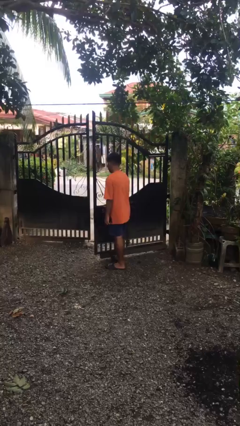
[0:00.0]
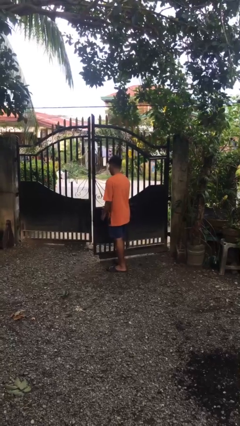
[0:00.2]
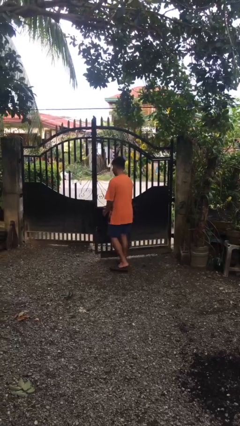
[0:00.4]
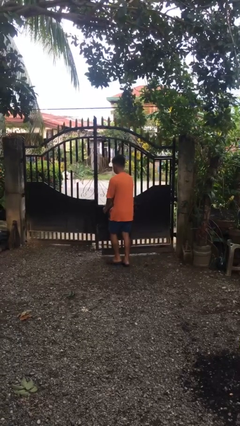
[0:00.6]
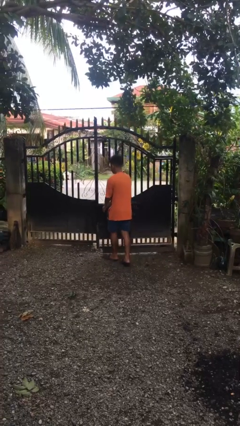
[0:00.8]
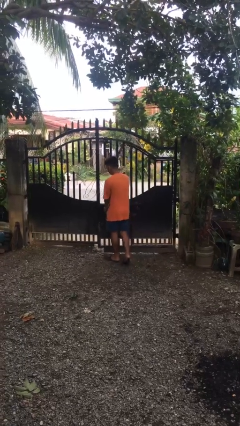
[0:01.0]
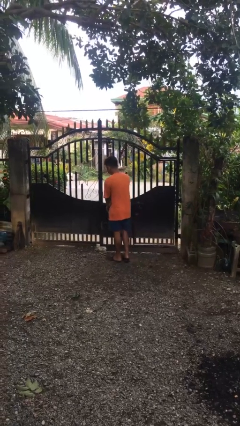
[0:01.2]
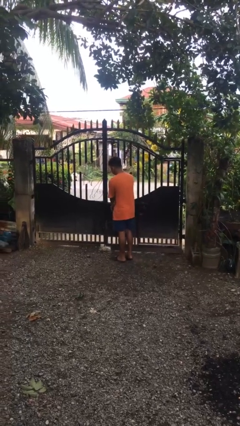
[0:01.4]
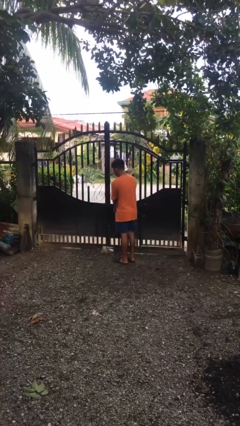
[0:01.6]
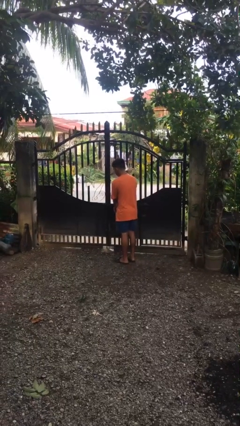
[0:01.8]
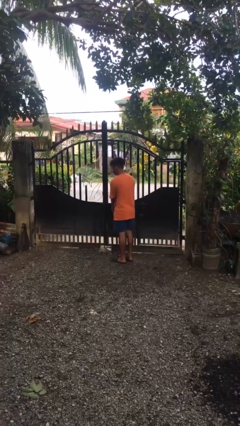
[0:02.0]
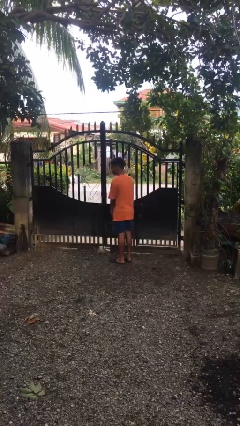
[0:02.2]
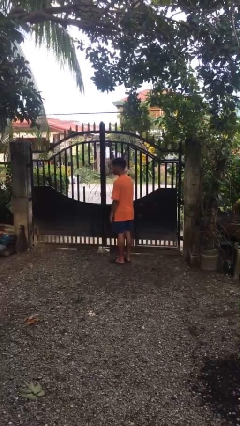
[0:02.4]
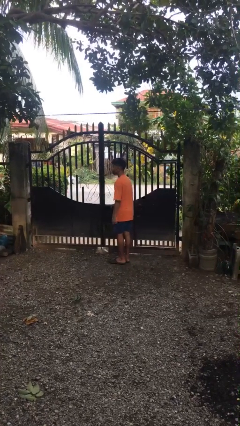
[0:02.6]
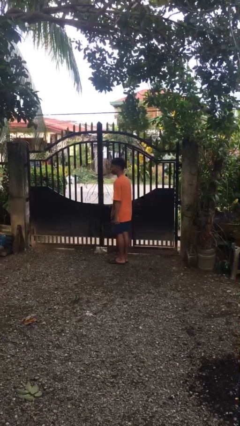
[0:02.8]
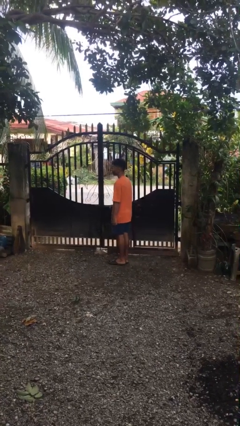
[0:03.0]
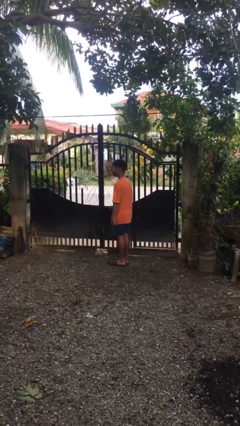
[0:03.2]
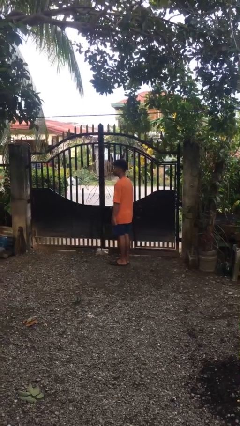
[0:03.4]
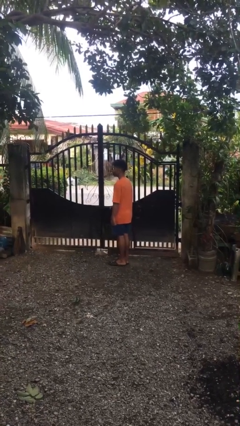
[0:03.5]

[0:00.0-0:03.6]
person closes gate

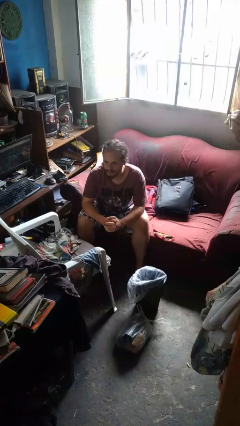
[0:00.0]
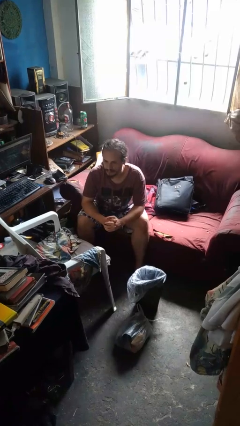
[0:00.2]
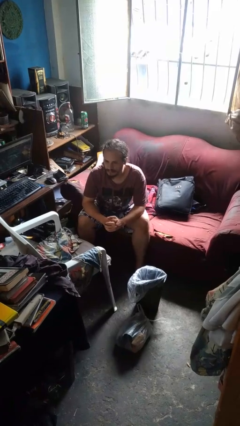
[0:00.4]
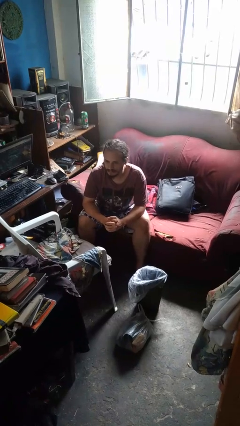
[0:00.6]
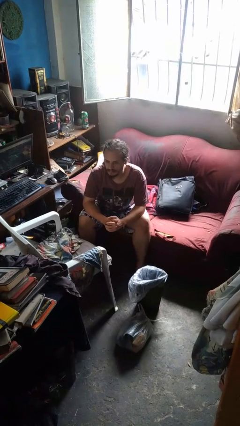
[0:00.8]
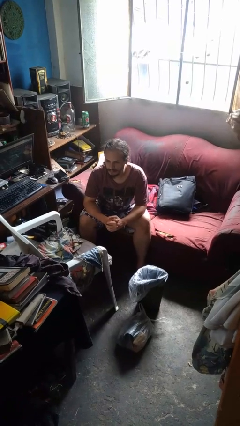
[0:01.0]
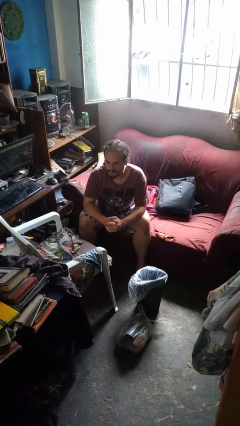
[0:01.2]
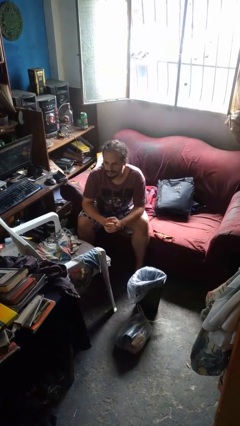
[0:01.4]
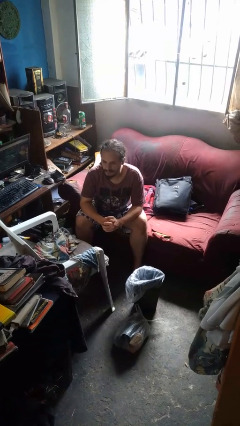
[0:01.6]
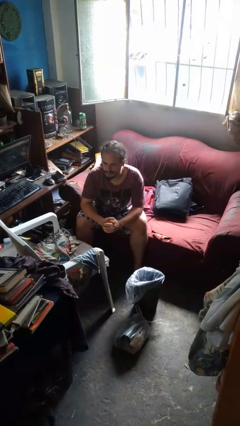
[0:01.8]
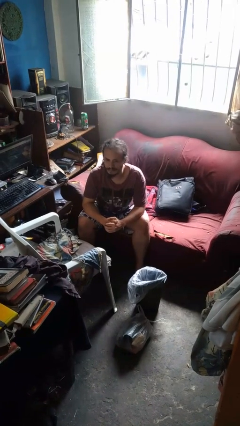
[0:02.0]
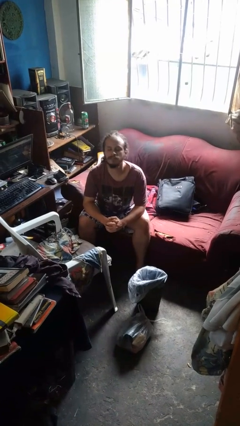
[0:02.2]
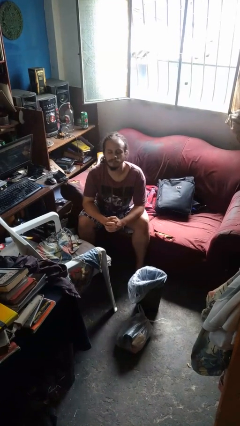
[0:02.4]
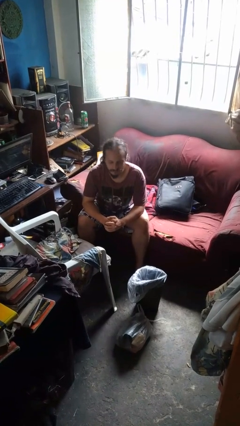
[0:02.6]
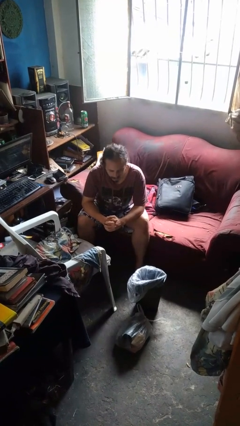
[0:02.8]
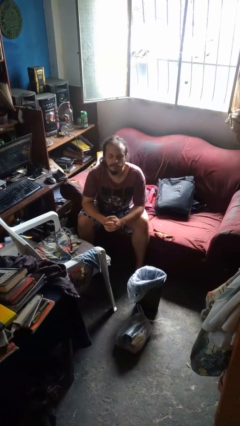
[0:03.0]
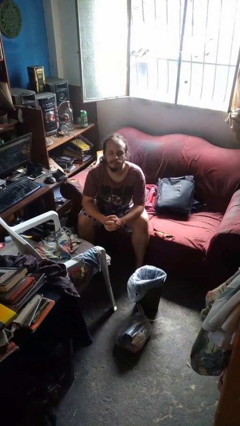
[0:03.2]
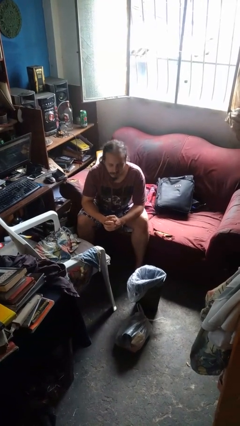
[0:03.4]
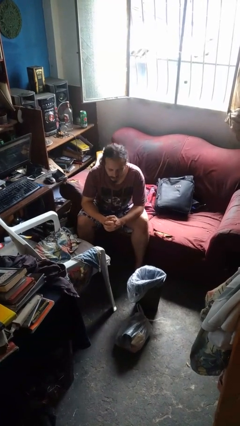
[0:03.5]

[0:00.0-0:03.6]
person nods head

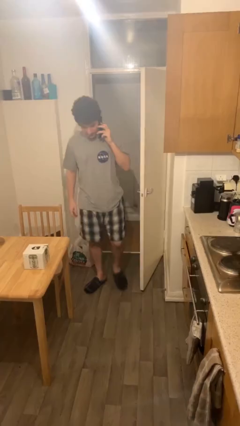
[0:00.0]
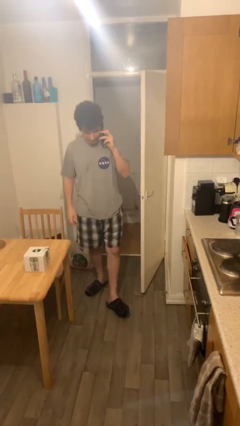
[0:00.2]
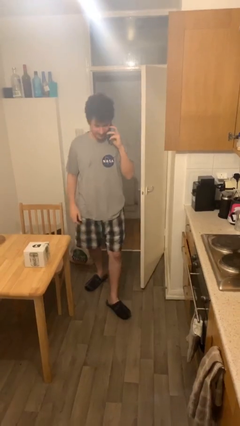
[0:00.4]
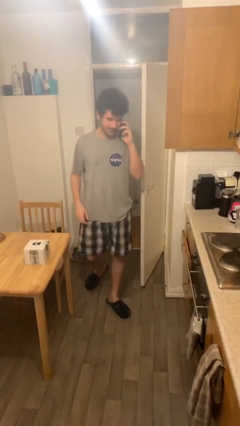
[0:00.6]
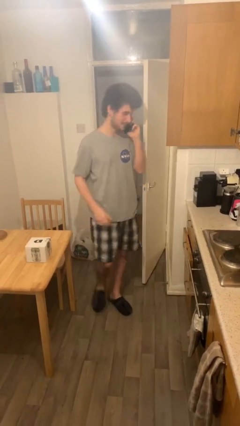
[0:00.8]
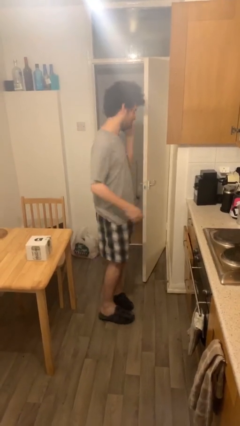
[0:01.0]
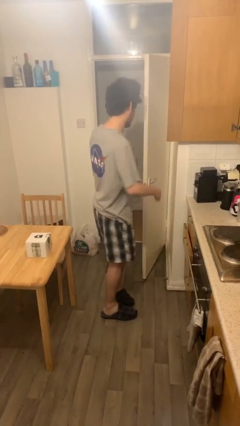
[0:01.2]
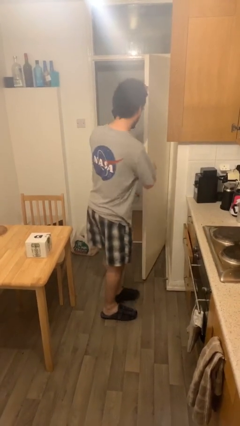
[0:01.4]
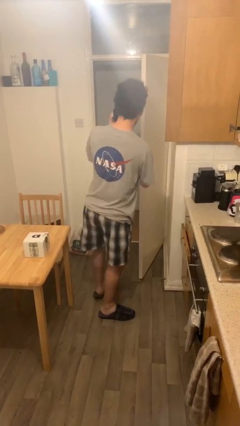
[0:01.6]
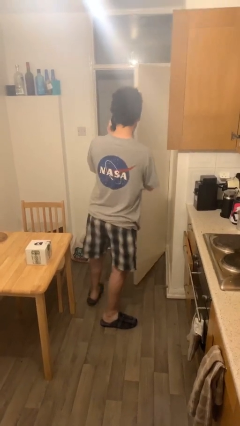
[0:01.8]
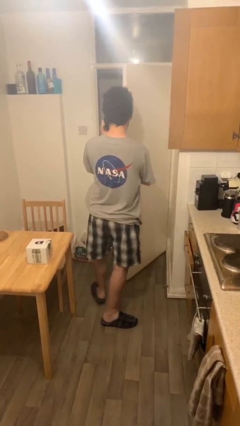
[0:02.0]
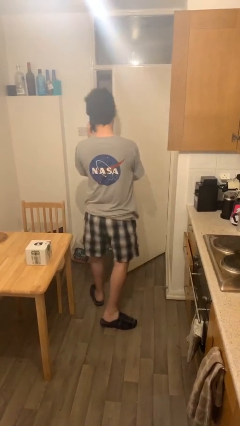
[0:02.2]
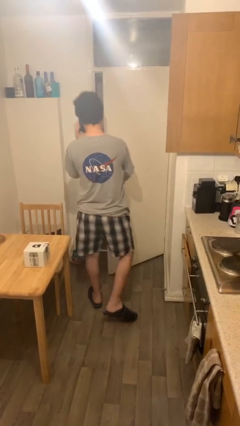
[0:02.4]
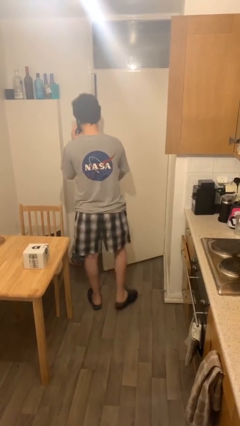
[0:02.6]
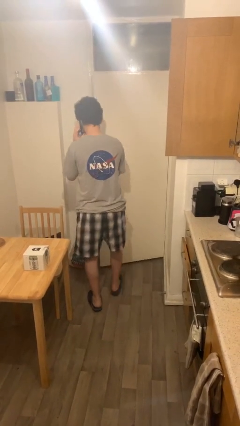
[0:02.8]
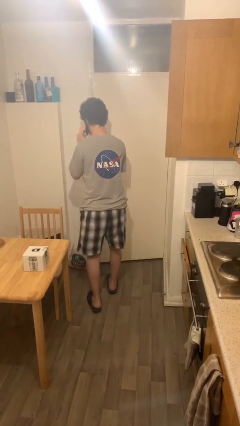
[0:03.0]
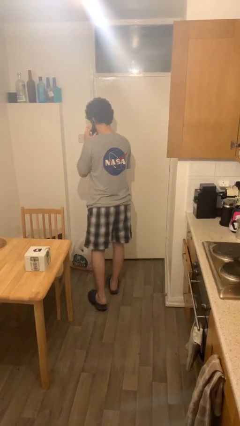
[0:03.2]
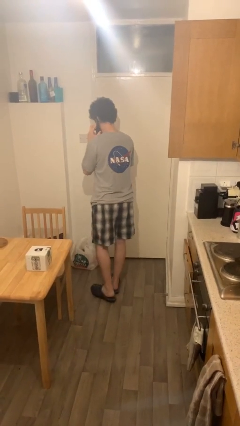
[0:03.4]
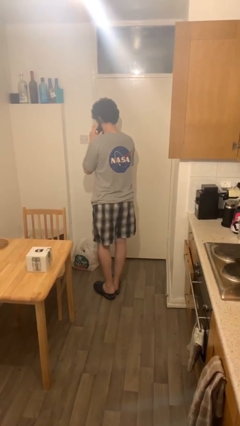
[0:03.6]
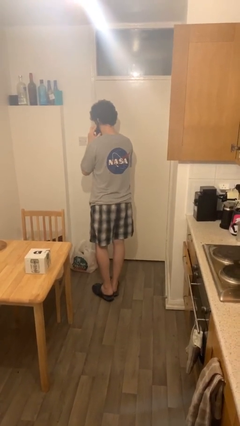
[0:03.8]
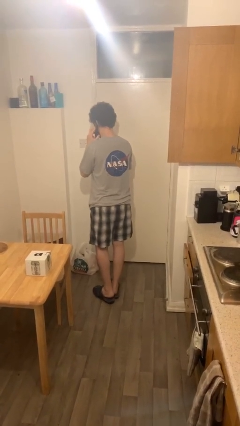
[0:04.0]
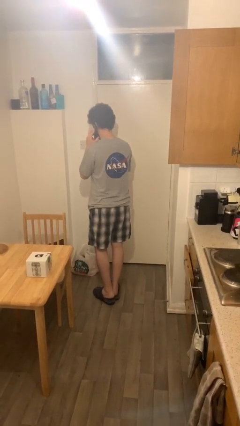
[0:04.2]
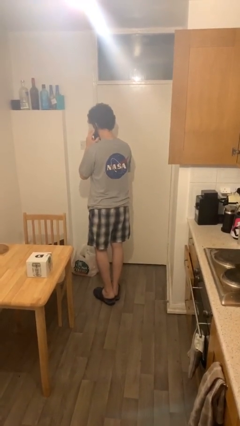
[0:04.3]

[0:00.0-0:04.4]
person closes facility door

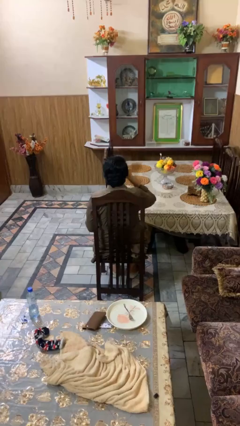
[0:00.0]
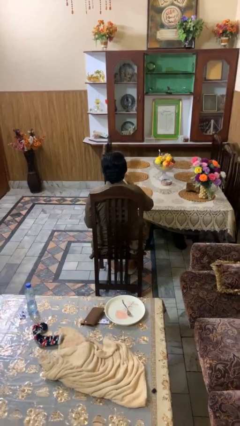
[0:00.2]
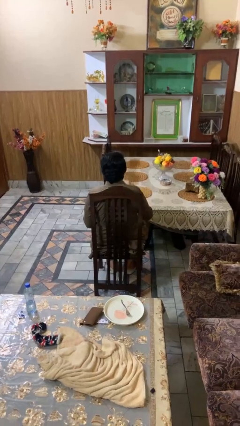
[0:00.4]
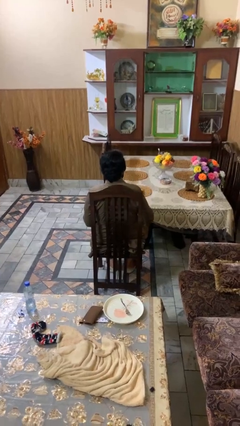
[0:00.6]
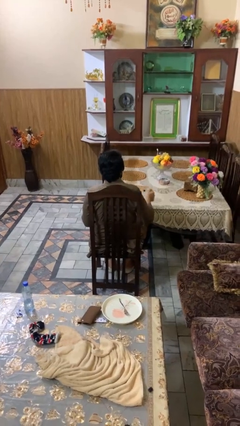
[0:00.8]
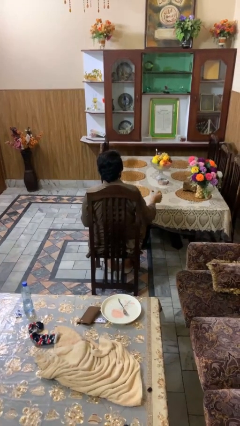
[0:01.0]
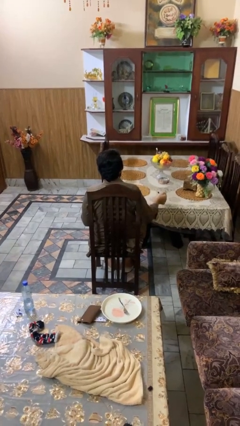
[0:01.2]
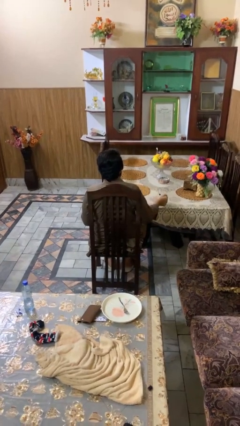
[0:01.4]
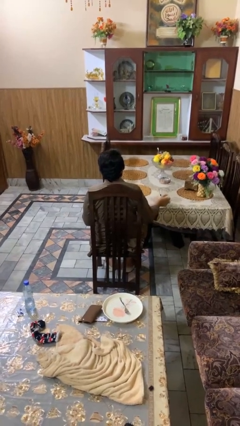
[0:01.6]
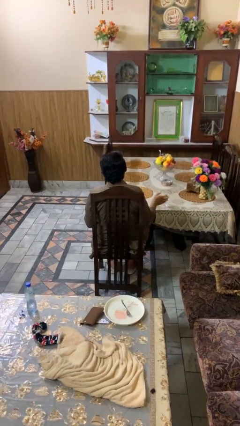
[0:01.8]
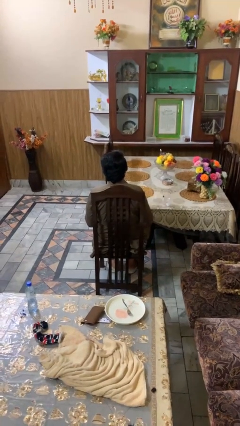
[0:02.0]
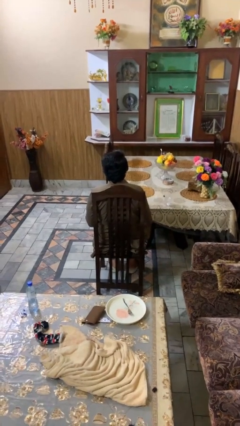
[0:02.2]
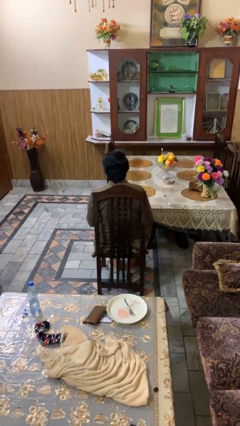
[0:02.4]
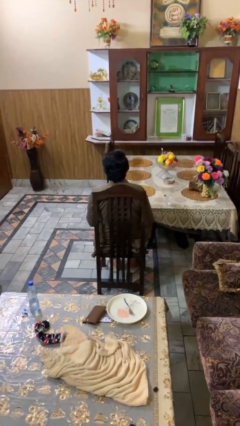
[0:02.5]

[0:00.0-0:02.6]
person puts down object on table

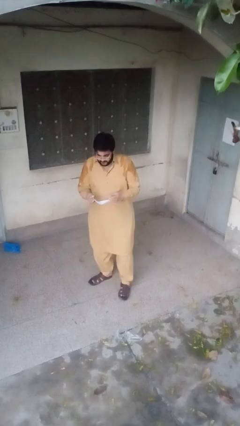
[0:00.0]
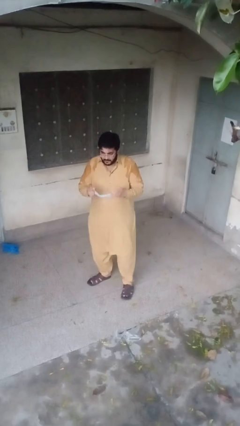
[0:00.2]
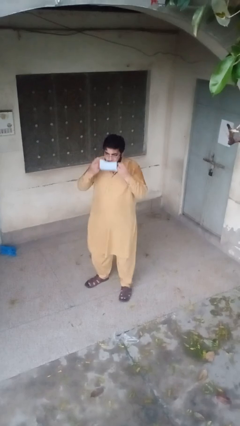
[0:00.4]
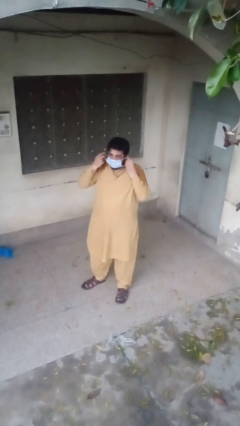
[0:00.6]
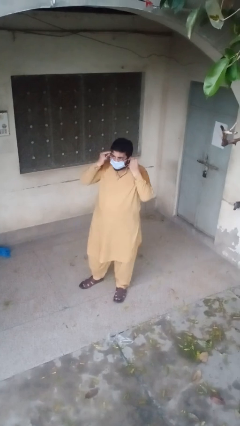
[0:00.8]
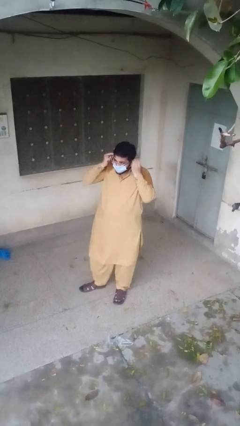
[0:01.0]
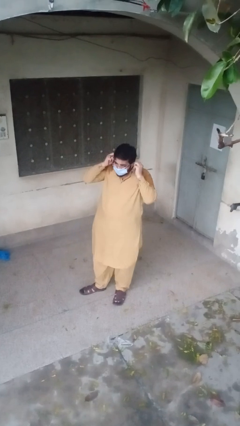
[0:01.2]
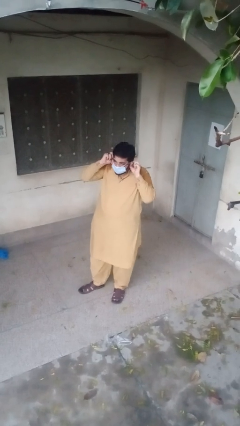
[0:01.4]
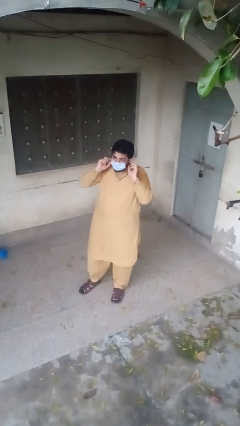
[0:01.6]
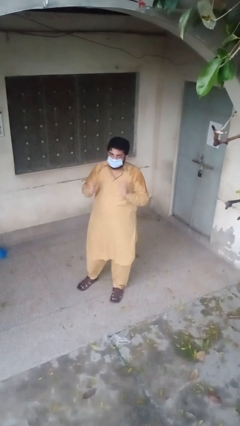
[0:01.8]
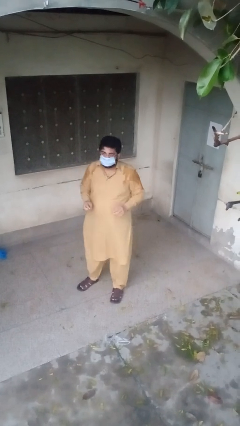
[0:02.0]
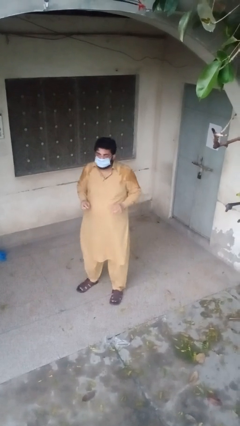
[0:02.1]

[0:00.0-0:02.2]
person puts on facemask

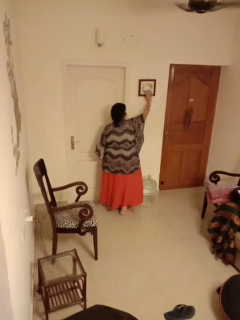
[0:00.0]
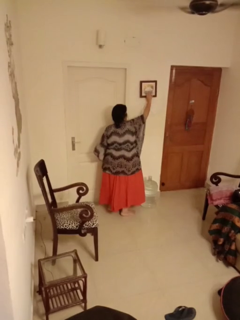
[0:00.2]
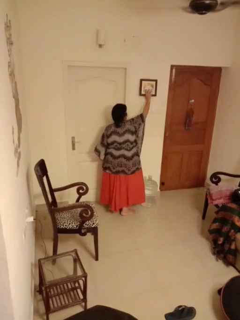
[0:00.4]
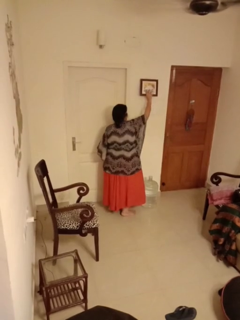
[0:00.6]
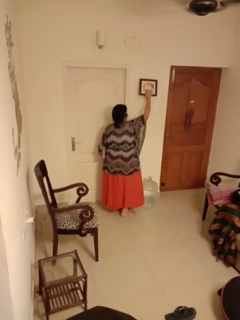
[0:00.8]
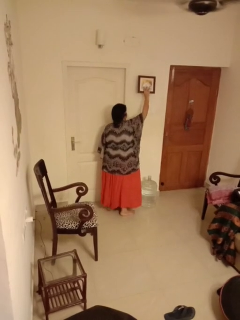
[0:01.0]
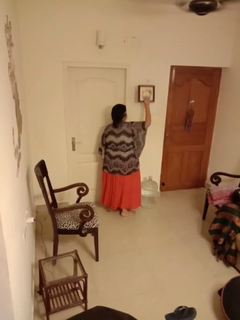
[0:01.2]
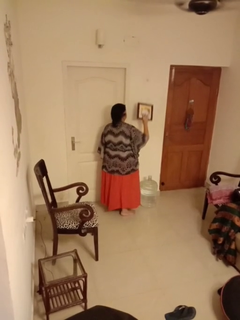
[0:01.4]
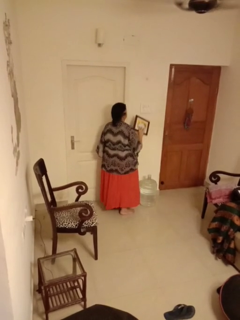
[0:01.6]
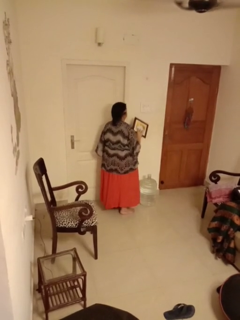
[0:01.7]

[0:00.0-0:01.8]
person takes down picture frame
